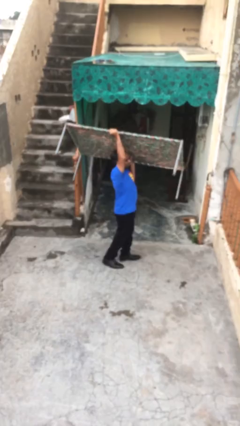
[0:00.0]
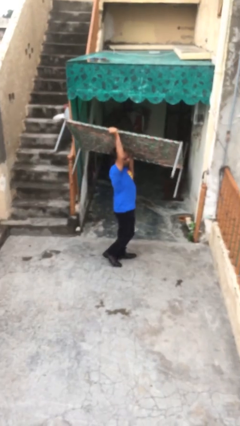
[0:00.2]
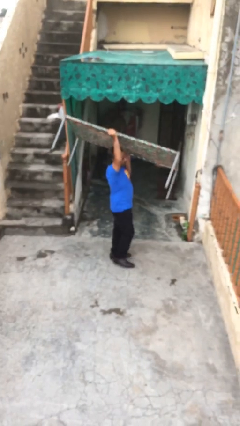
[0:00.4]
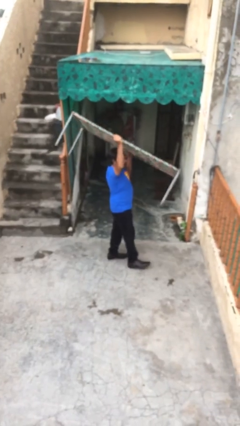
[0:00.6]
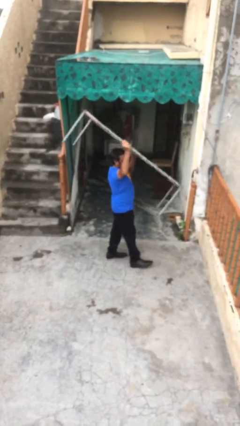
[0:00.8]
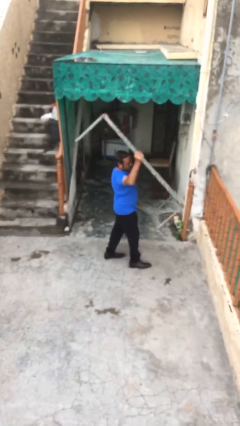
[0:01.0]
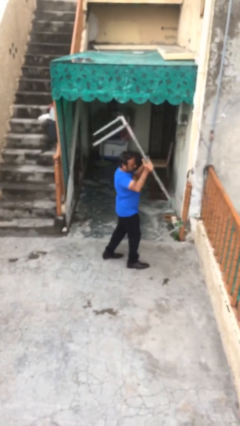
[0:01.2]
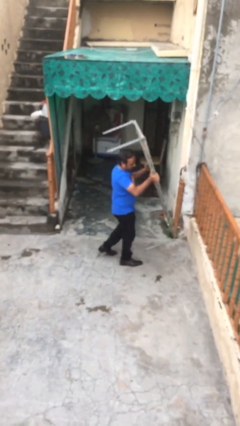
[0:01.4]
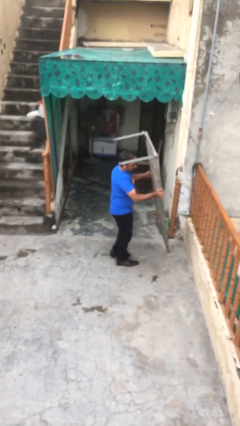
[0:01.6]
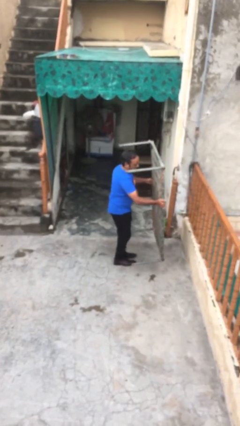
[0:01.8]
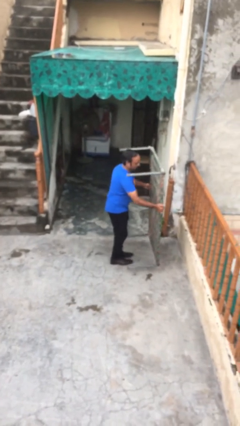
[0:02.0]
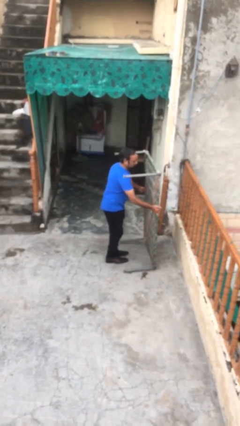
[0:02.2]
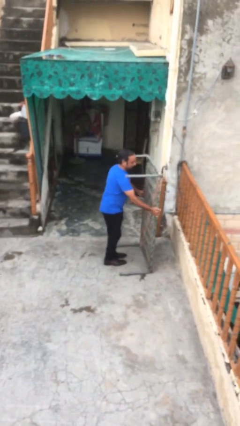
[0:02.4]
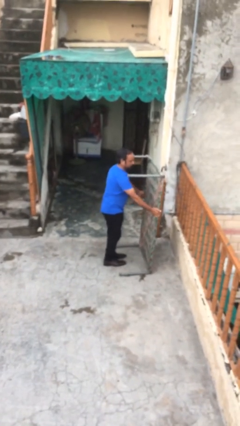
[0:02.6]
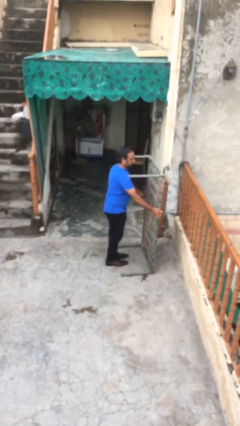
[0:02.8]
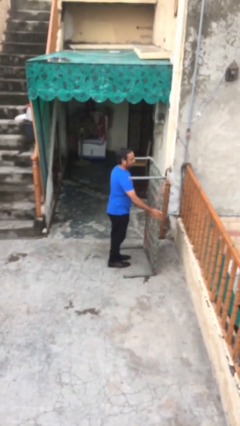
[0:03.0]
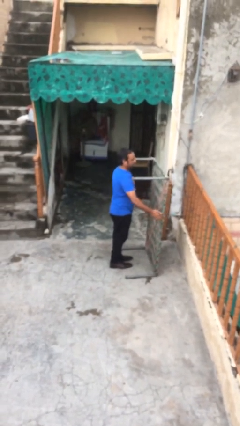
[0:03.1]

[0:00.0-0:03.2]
person puts down object on floor

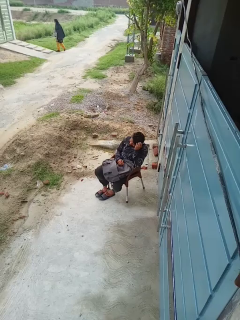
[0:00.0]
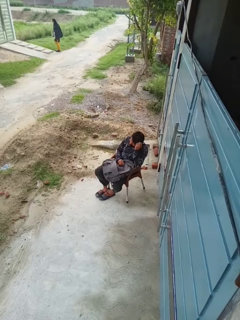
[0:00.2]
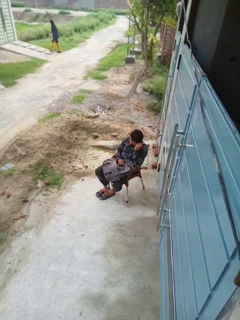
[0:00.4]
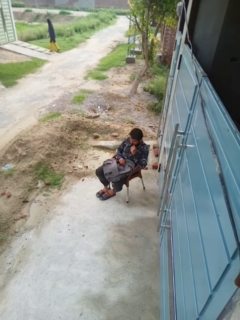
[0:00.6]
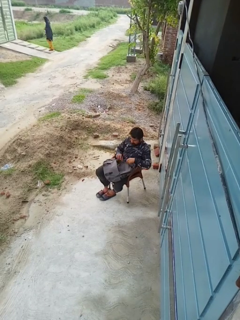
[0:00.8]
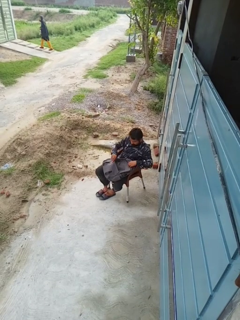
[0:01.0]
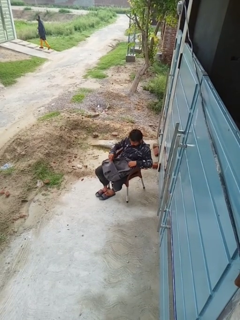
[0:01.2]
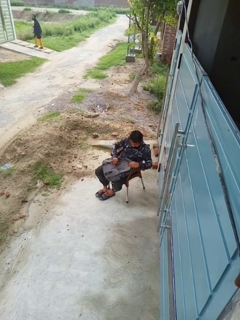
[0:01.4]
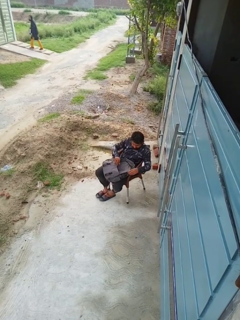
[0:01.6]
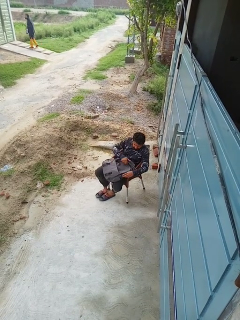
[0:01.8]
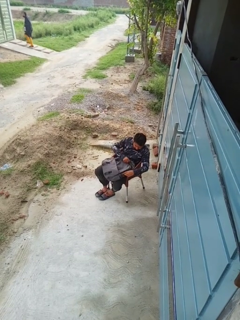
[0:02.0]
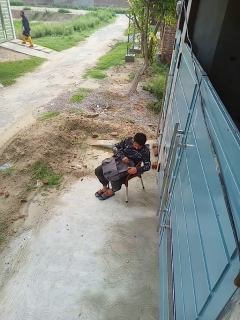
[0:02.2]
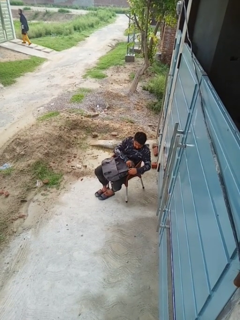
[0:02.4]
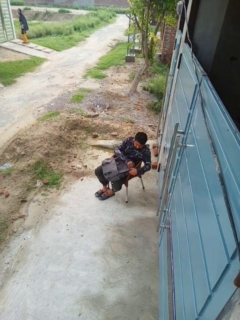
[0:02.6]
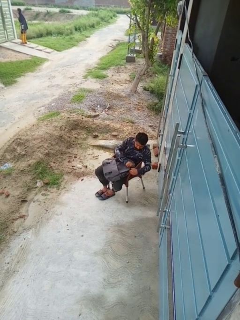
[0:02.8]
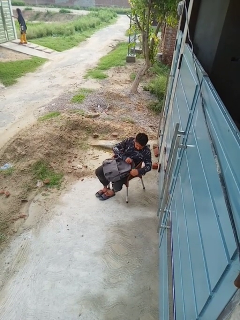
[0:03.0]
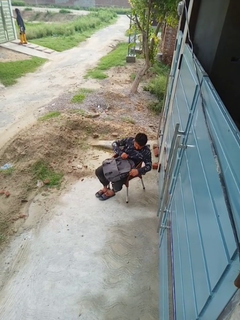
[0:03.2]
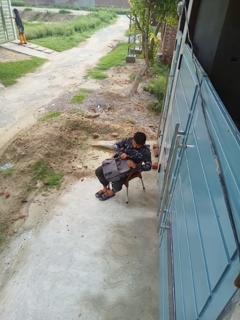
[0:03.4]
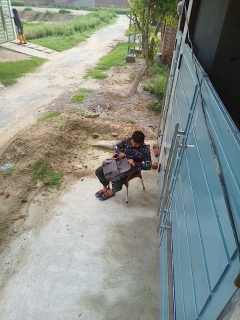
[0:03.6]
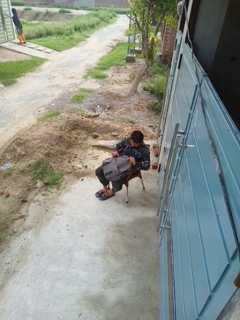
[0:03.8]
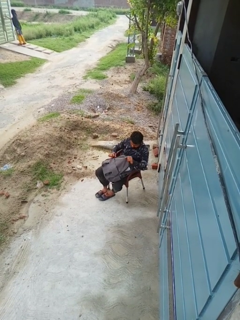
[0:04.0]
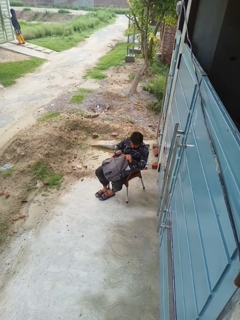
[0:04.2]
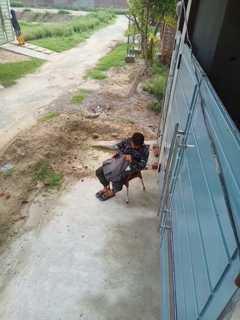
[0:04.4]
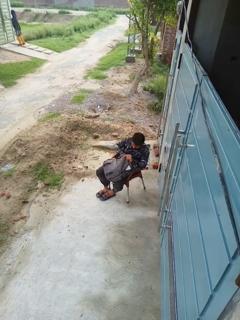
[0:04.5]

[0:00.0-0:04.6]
person searches in backpack

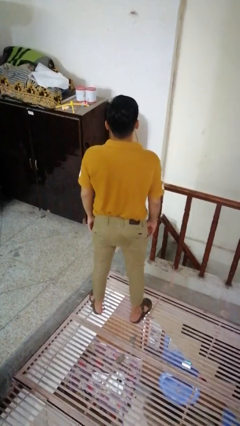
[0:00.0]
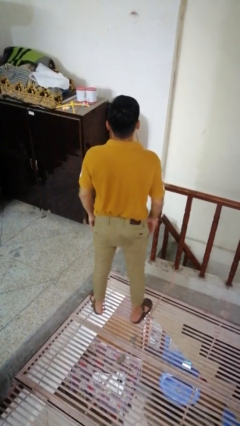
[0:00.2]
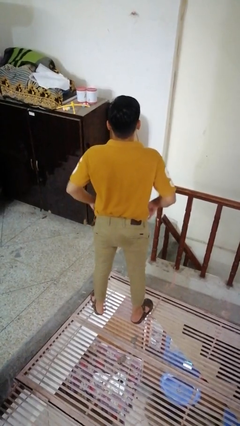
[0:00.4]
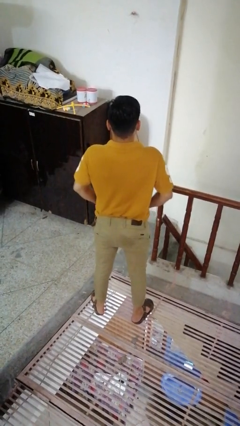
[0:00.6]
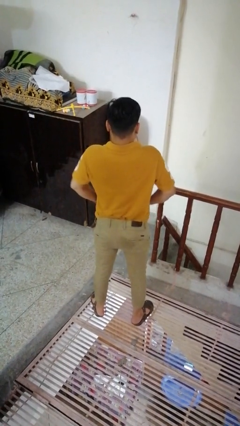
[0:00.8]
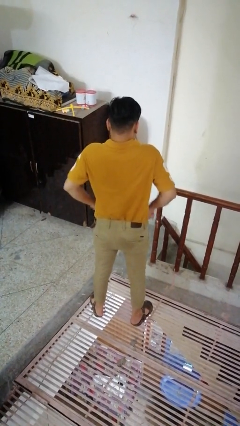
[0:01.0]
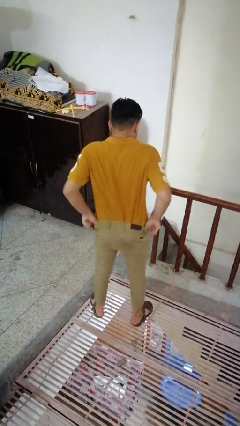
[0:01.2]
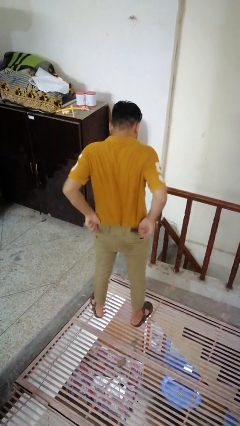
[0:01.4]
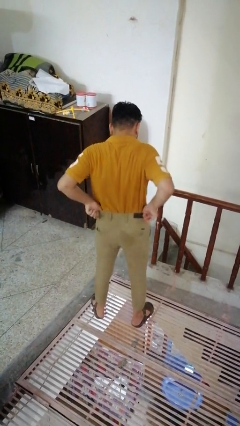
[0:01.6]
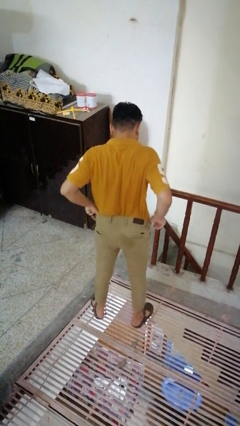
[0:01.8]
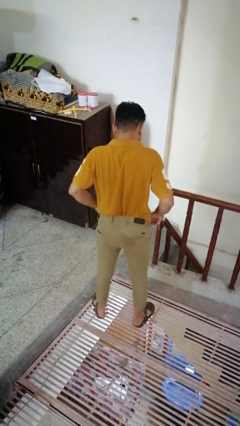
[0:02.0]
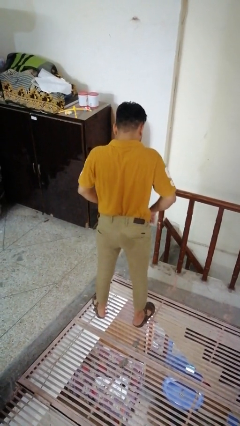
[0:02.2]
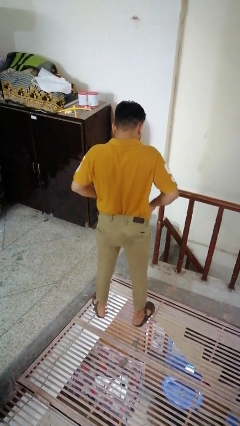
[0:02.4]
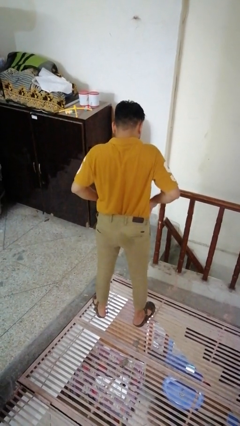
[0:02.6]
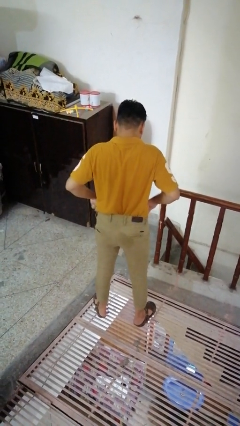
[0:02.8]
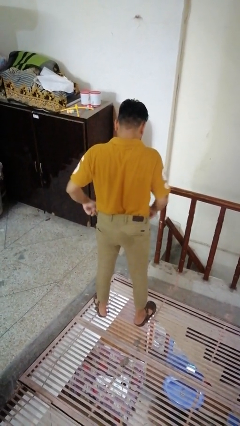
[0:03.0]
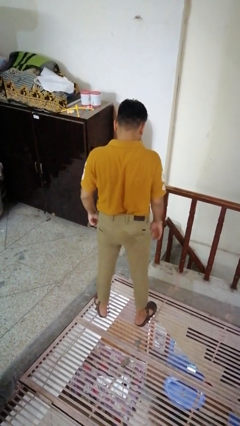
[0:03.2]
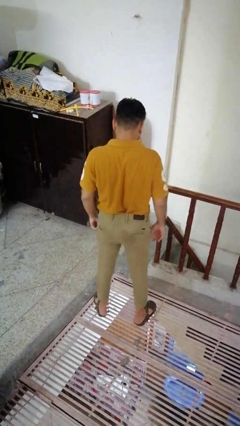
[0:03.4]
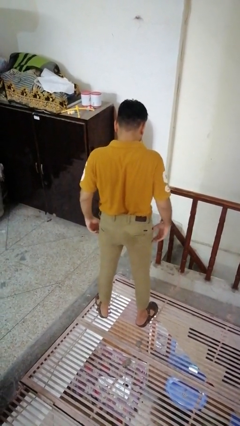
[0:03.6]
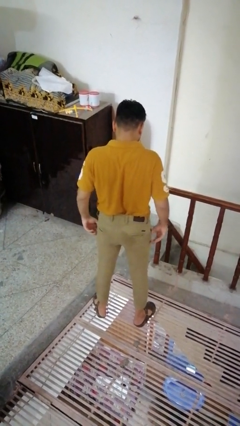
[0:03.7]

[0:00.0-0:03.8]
person hikes up pants

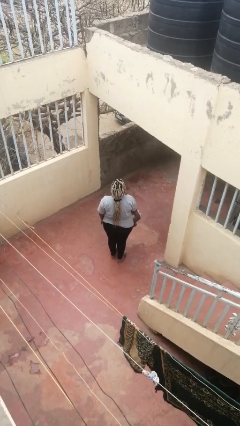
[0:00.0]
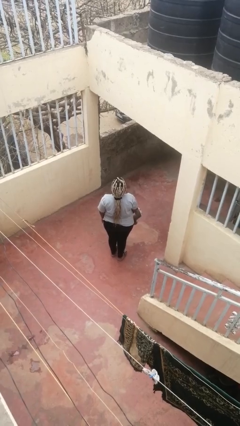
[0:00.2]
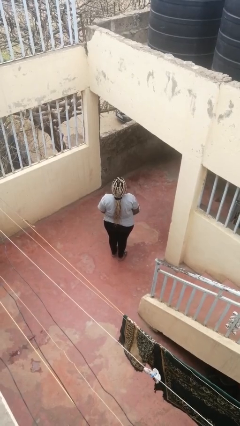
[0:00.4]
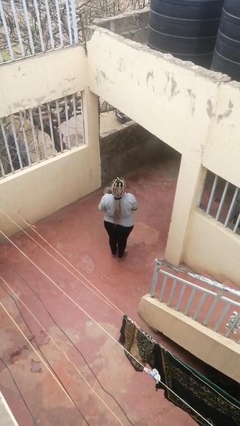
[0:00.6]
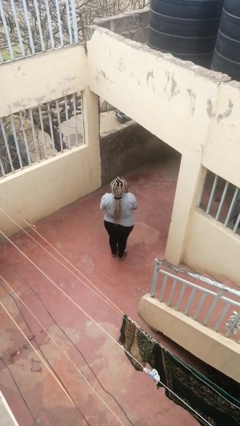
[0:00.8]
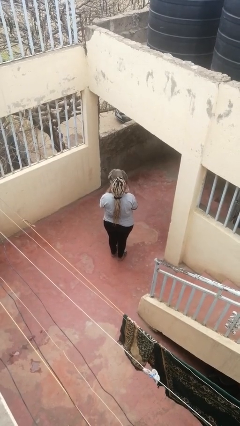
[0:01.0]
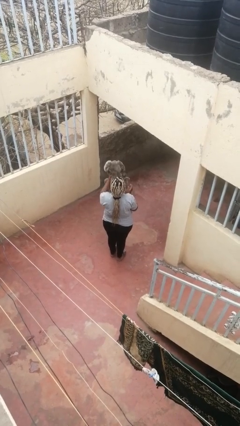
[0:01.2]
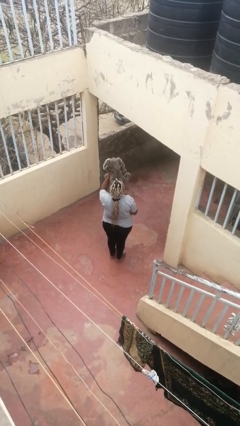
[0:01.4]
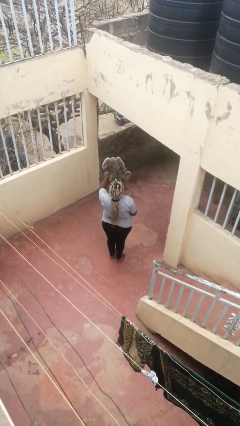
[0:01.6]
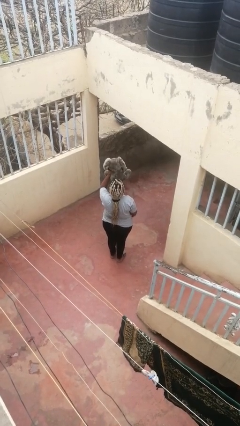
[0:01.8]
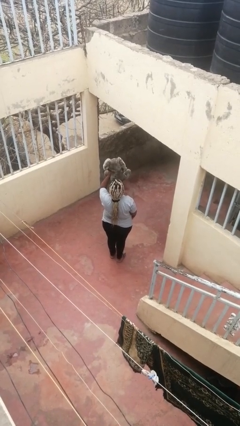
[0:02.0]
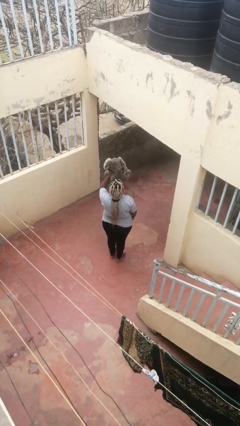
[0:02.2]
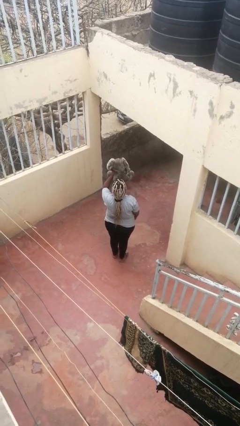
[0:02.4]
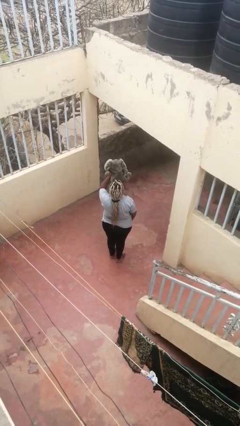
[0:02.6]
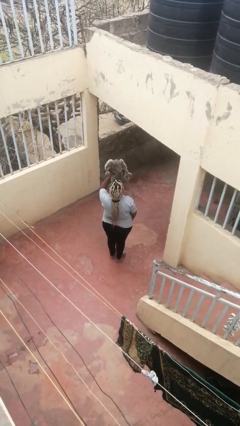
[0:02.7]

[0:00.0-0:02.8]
person holds object above head

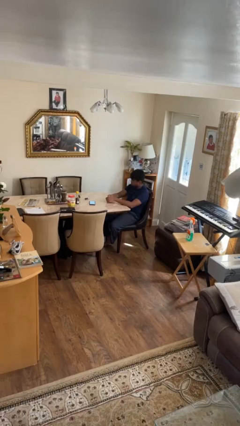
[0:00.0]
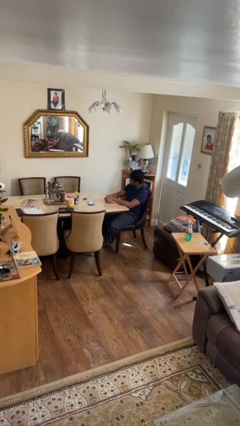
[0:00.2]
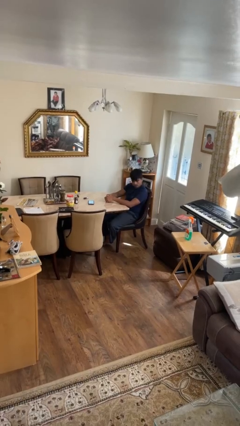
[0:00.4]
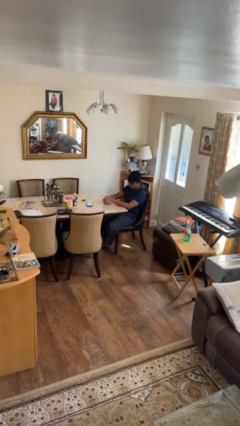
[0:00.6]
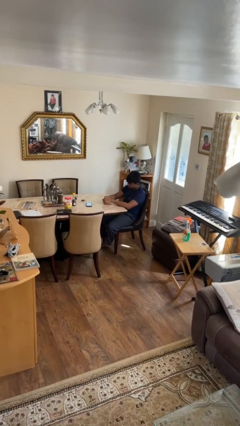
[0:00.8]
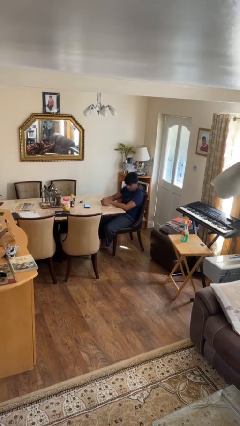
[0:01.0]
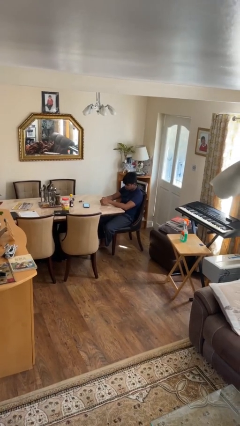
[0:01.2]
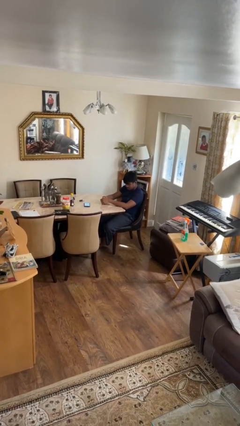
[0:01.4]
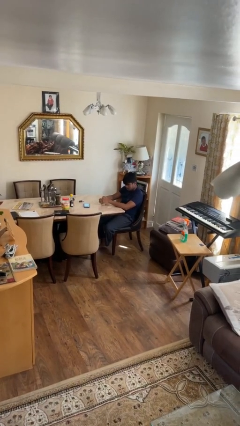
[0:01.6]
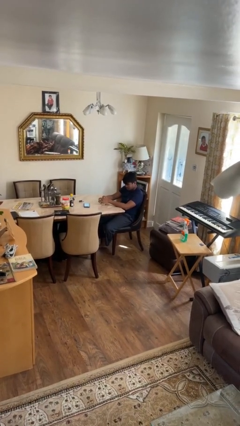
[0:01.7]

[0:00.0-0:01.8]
person shakes head

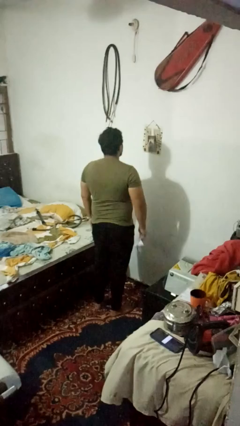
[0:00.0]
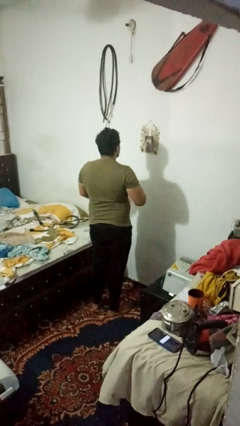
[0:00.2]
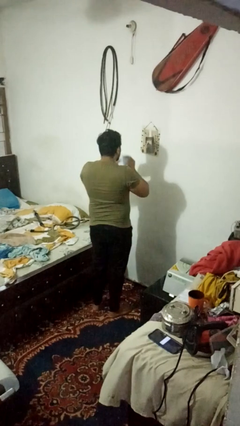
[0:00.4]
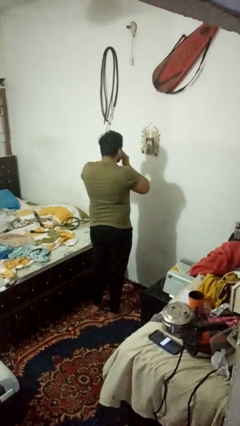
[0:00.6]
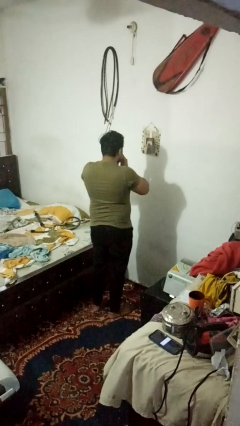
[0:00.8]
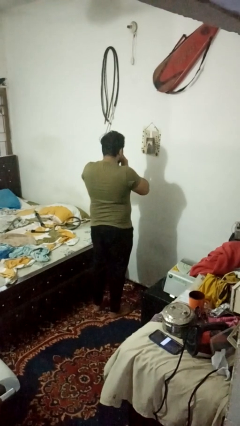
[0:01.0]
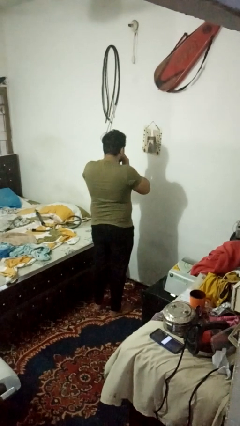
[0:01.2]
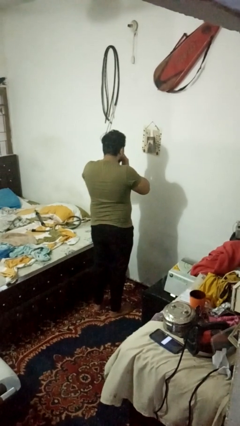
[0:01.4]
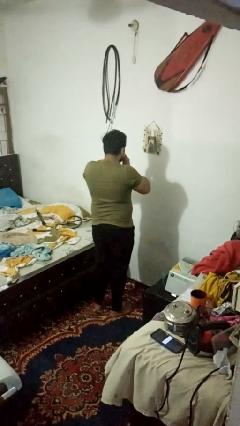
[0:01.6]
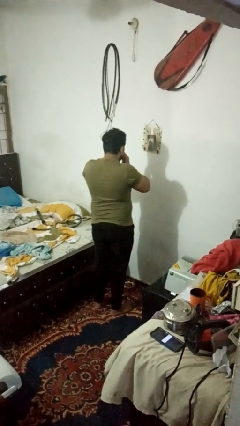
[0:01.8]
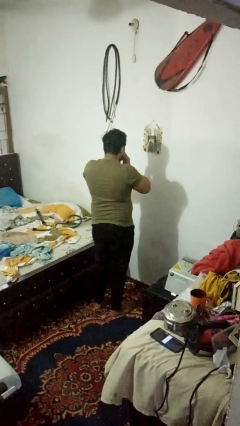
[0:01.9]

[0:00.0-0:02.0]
person blows nose
